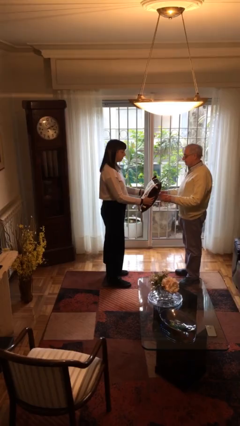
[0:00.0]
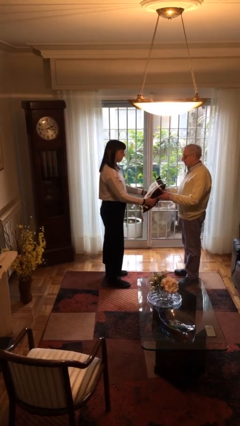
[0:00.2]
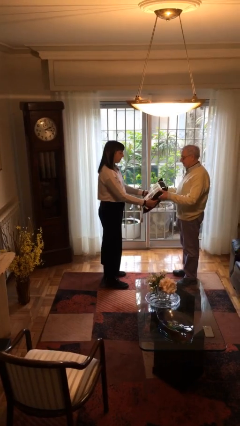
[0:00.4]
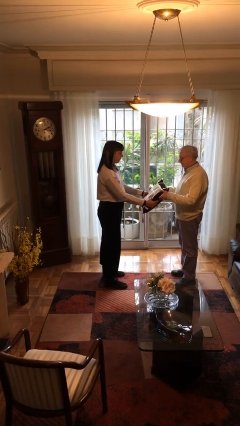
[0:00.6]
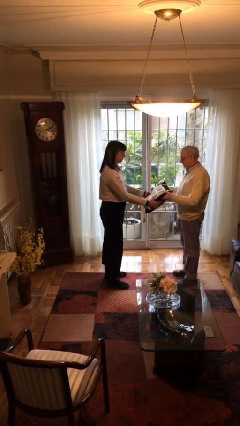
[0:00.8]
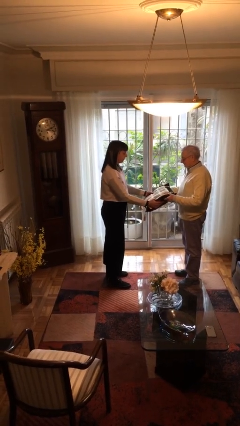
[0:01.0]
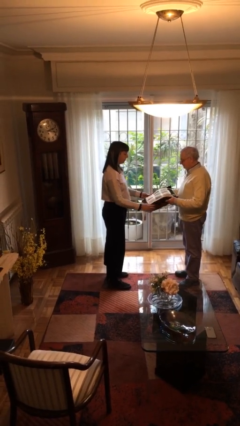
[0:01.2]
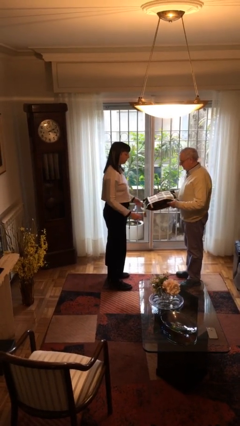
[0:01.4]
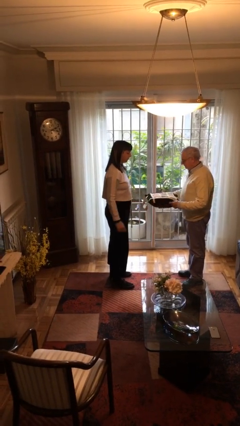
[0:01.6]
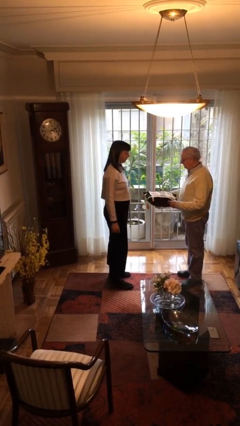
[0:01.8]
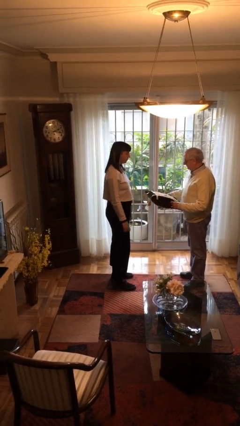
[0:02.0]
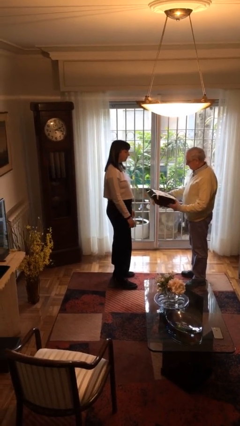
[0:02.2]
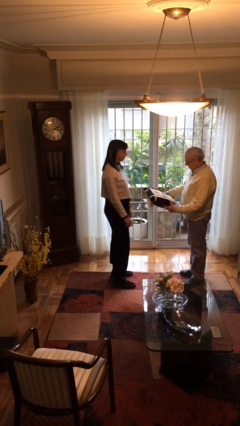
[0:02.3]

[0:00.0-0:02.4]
person transfers object to person

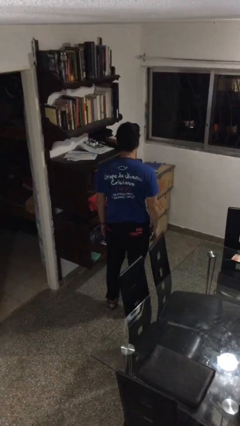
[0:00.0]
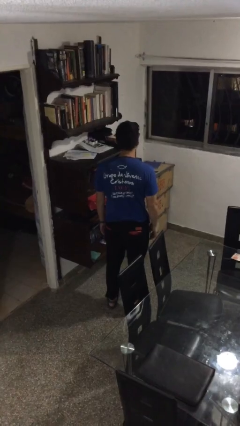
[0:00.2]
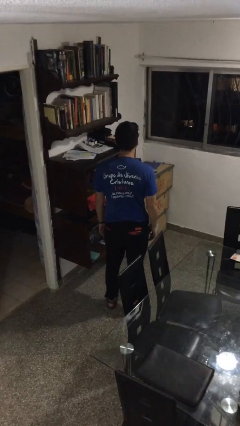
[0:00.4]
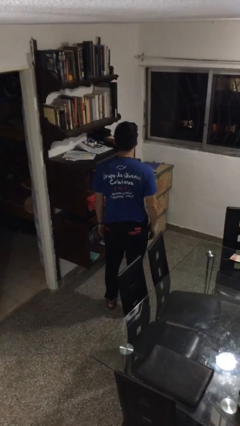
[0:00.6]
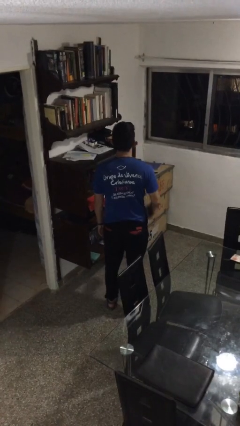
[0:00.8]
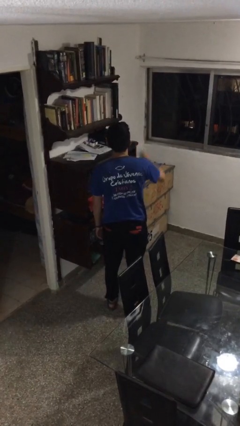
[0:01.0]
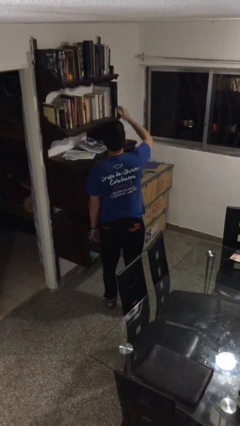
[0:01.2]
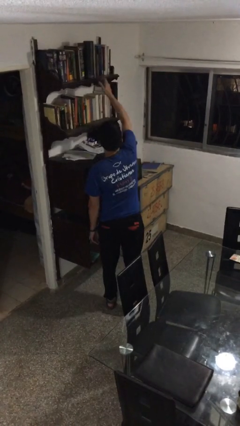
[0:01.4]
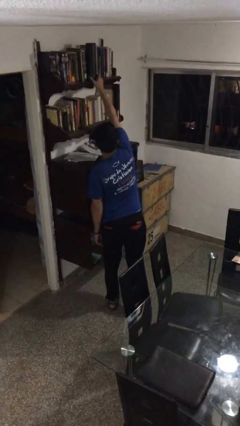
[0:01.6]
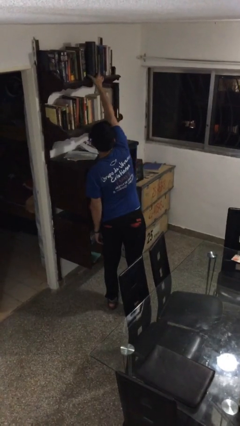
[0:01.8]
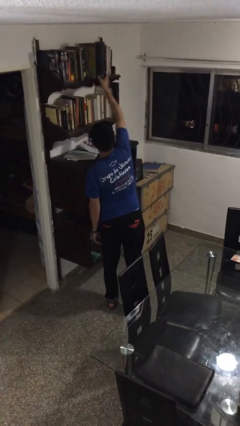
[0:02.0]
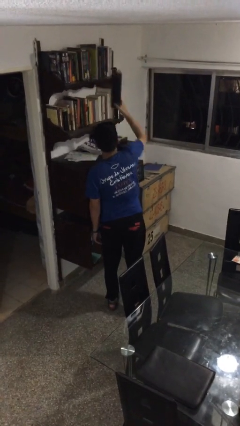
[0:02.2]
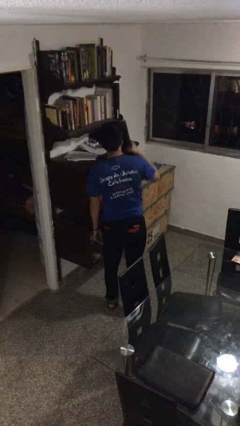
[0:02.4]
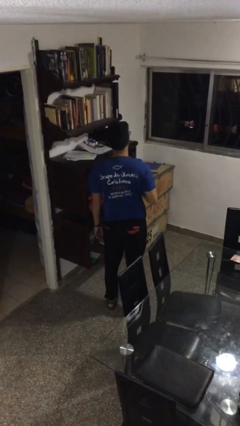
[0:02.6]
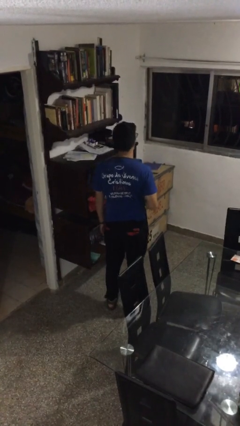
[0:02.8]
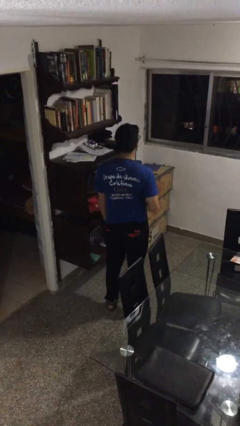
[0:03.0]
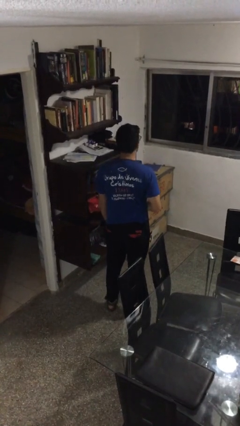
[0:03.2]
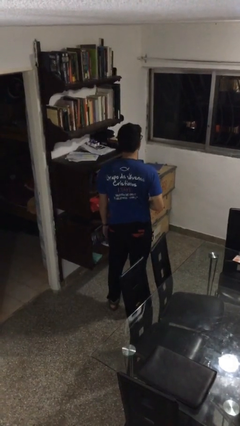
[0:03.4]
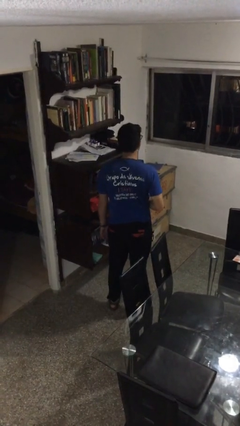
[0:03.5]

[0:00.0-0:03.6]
person picks up object from shelf

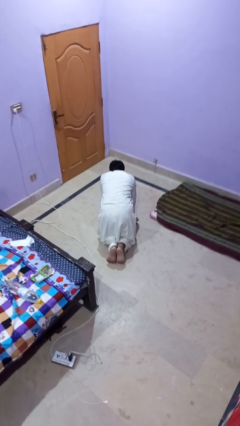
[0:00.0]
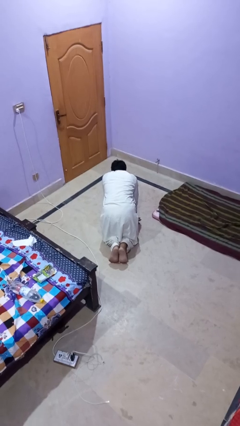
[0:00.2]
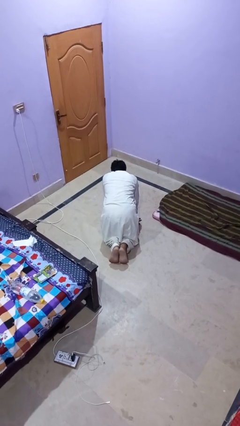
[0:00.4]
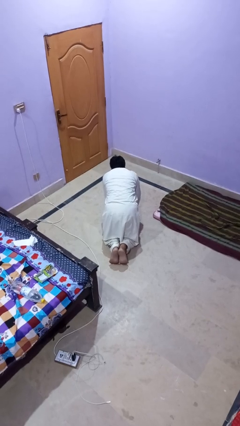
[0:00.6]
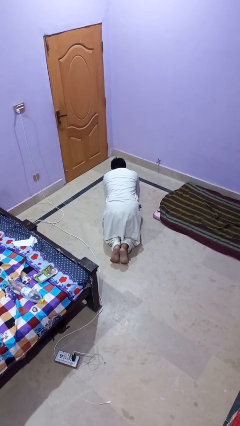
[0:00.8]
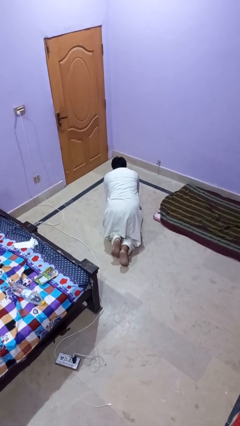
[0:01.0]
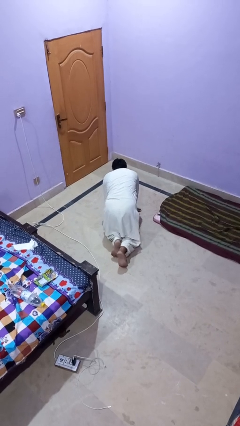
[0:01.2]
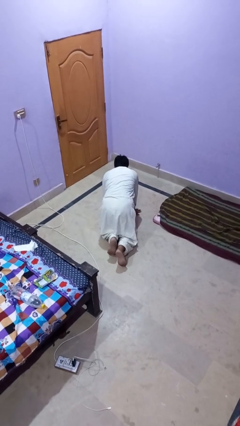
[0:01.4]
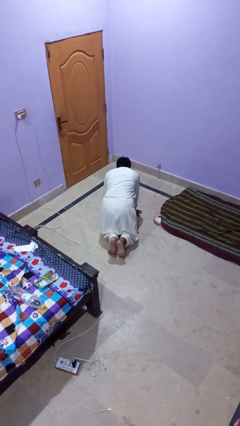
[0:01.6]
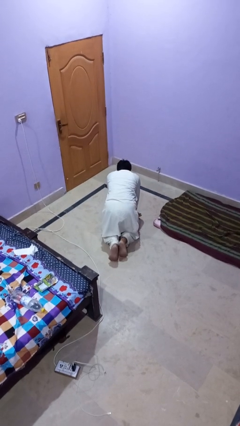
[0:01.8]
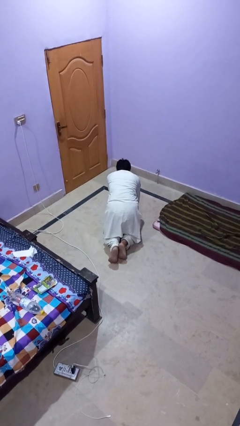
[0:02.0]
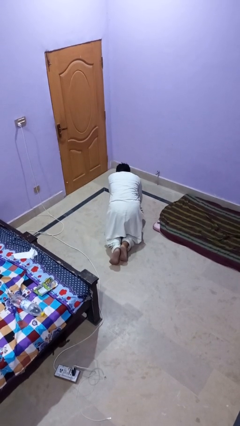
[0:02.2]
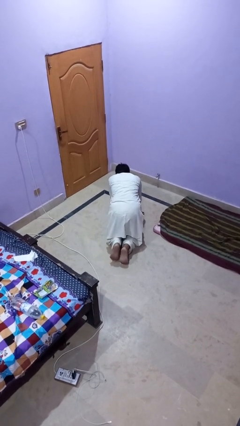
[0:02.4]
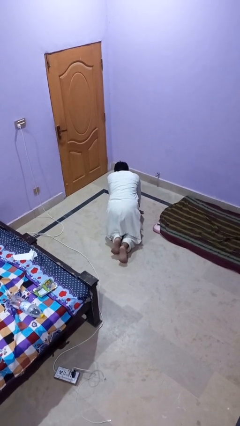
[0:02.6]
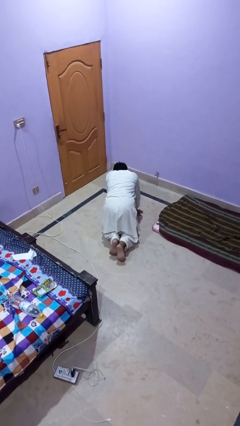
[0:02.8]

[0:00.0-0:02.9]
person crawls

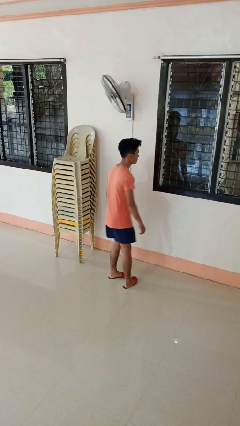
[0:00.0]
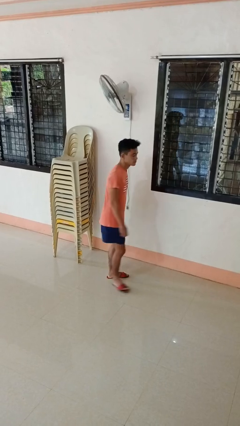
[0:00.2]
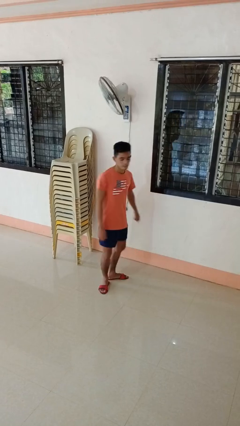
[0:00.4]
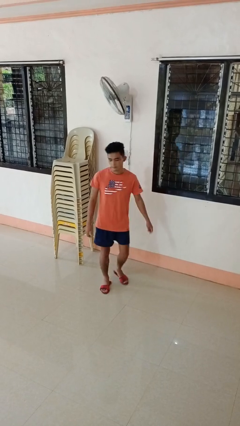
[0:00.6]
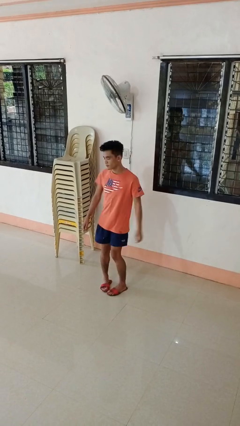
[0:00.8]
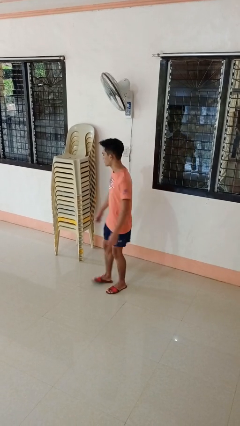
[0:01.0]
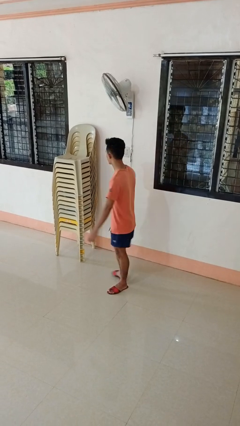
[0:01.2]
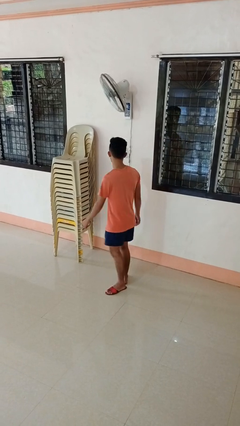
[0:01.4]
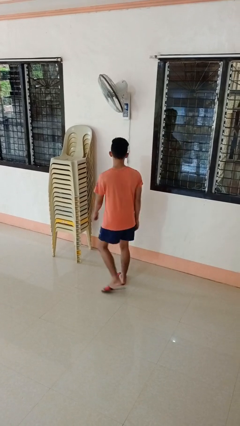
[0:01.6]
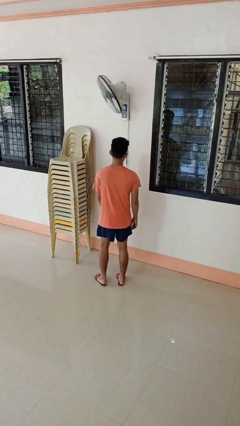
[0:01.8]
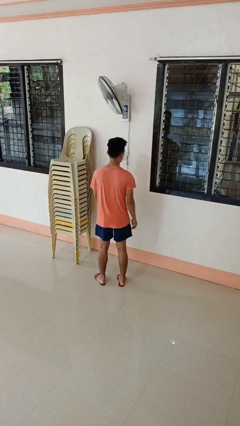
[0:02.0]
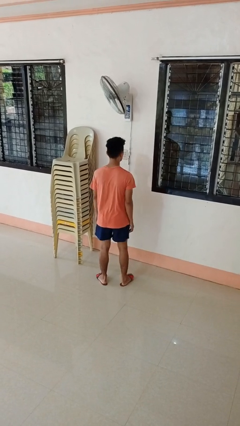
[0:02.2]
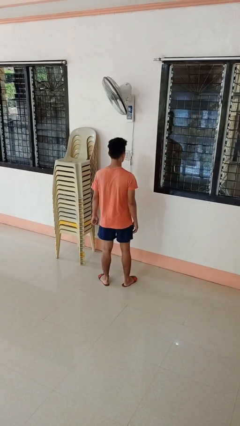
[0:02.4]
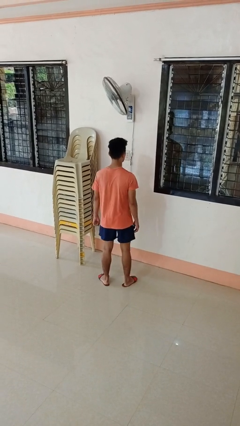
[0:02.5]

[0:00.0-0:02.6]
person twirls

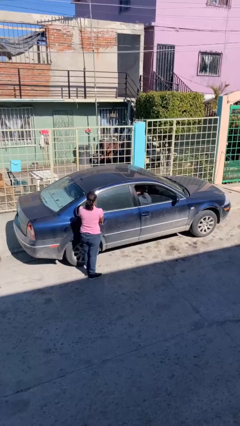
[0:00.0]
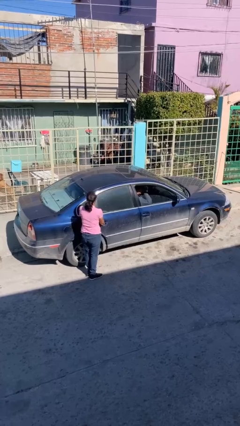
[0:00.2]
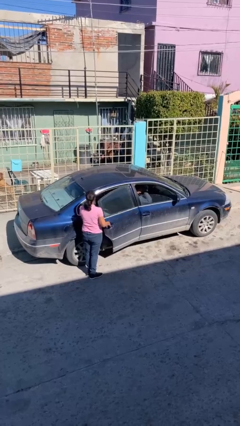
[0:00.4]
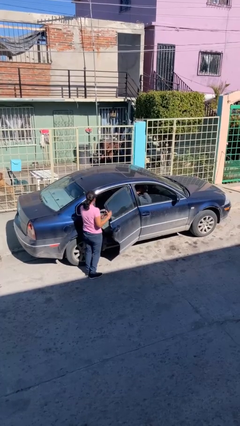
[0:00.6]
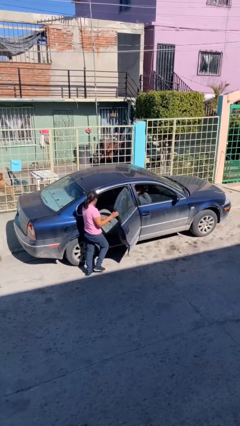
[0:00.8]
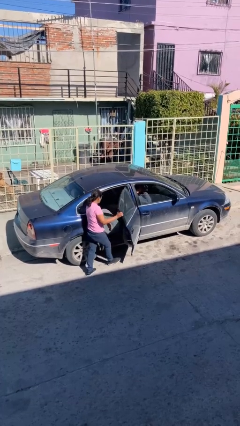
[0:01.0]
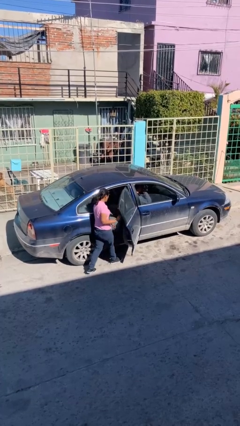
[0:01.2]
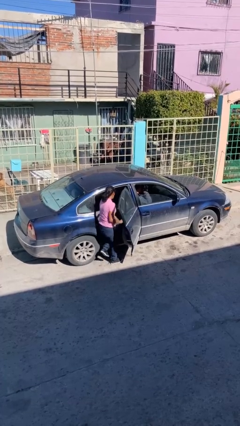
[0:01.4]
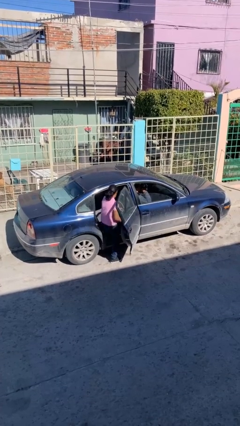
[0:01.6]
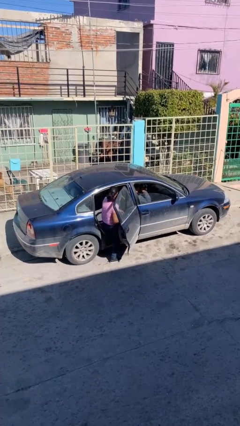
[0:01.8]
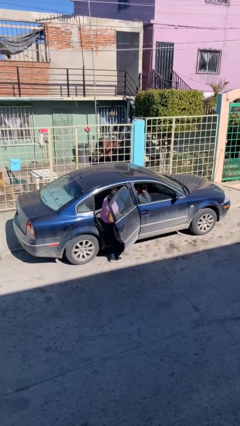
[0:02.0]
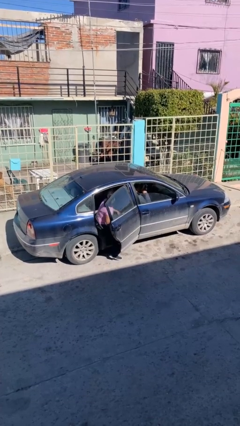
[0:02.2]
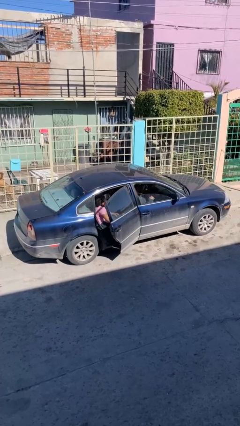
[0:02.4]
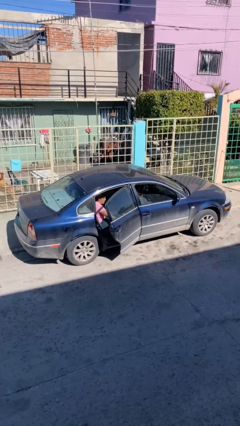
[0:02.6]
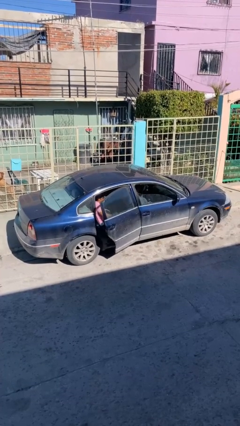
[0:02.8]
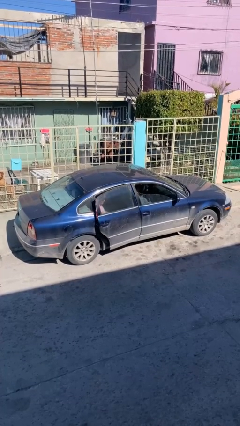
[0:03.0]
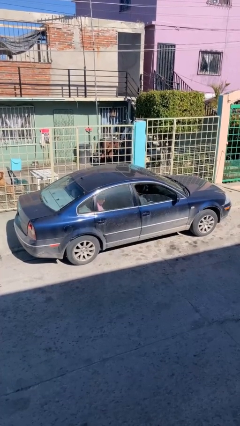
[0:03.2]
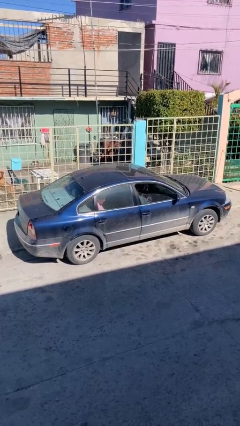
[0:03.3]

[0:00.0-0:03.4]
car picks up person

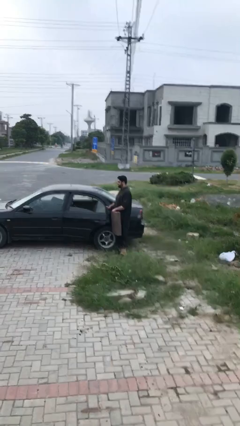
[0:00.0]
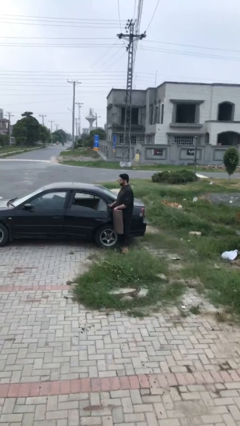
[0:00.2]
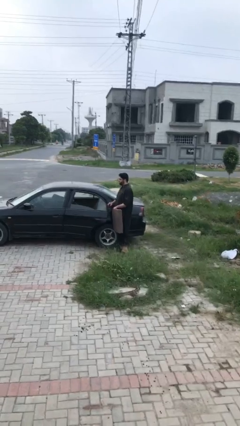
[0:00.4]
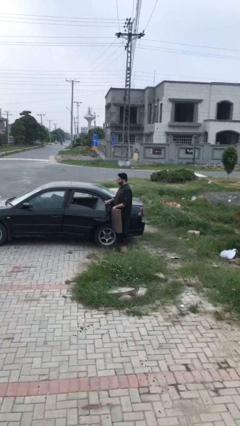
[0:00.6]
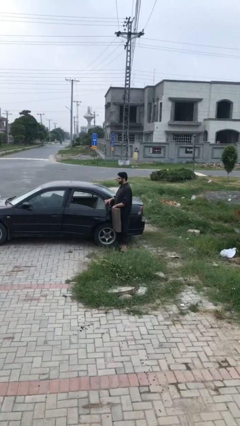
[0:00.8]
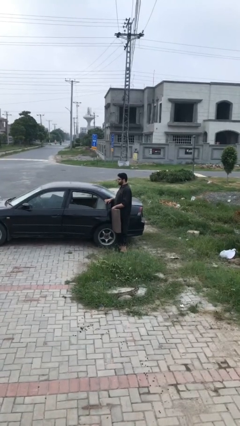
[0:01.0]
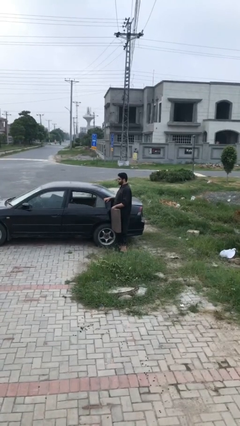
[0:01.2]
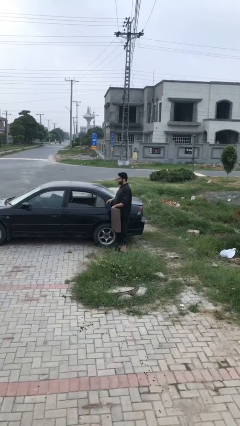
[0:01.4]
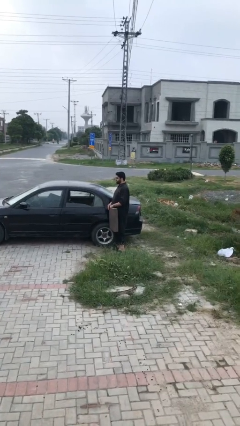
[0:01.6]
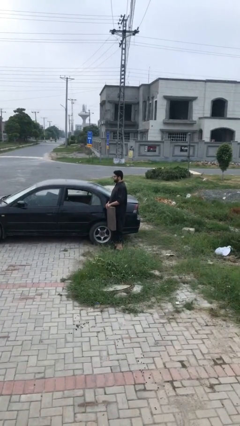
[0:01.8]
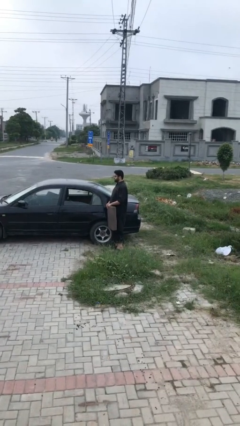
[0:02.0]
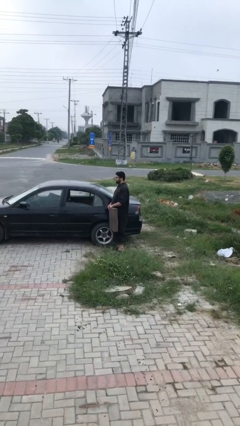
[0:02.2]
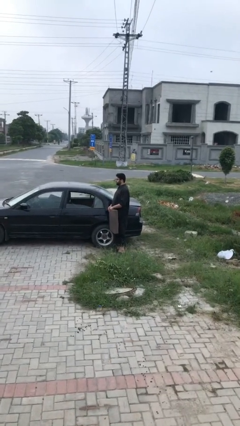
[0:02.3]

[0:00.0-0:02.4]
person closes car door
